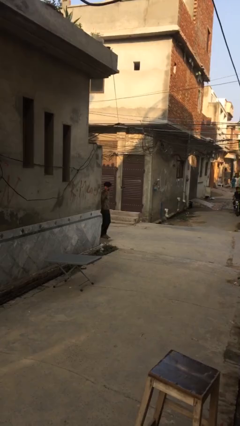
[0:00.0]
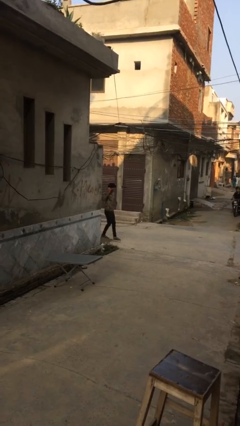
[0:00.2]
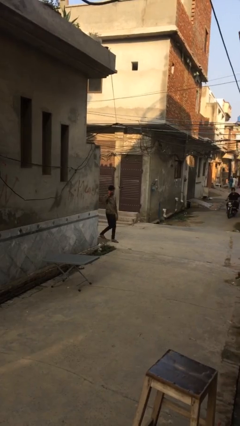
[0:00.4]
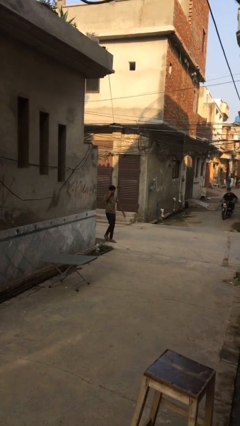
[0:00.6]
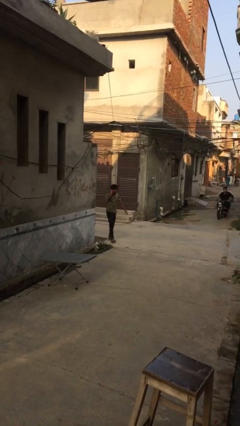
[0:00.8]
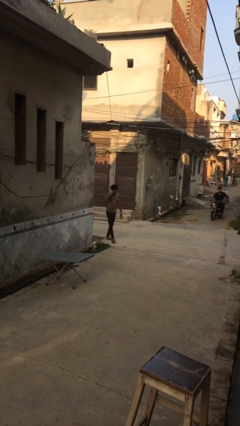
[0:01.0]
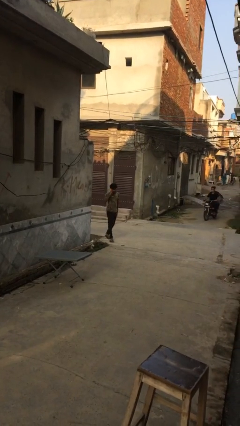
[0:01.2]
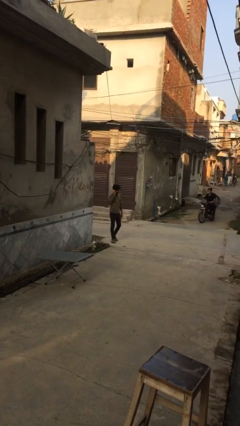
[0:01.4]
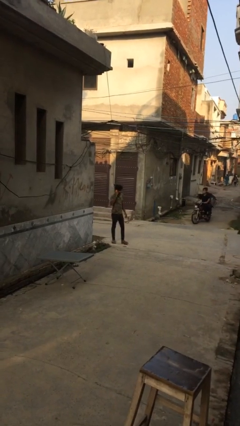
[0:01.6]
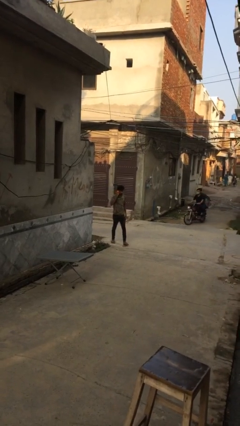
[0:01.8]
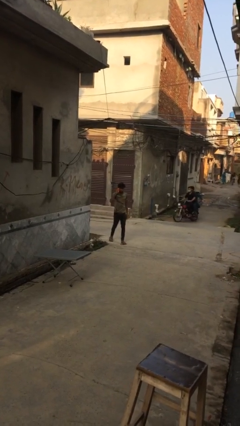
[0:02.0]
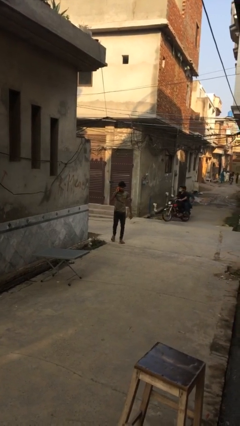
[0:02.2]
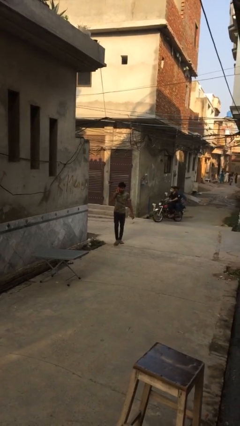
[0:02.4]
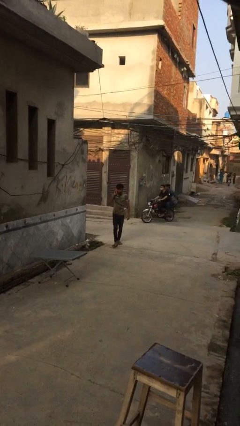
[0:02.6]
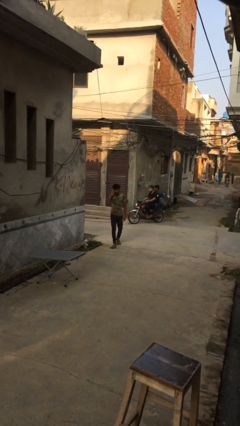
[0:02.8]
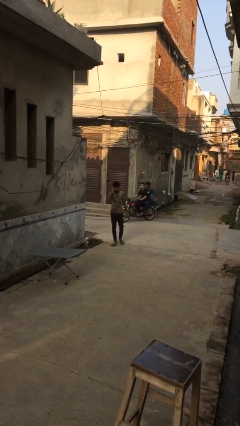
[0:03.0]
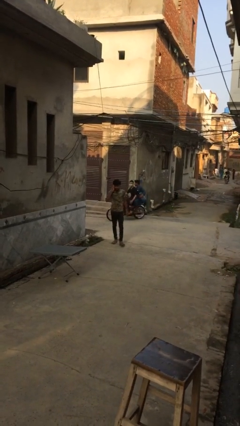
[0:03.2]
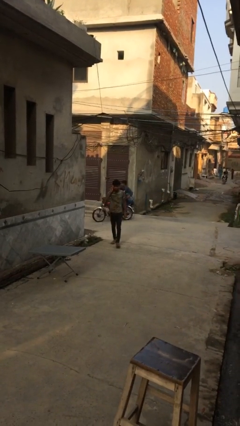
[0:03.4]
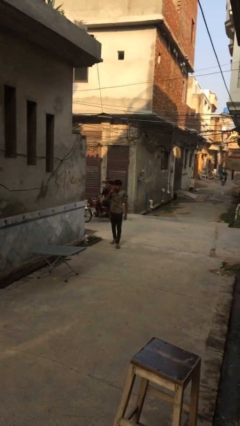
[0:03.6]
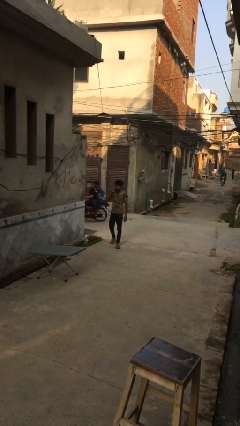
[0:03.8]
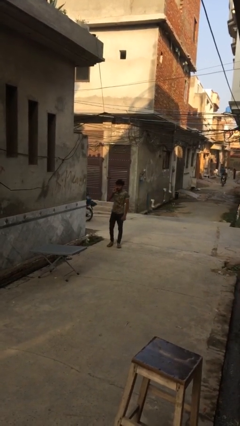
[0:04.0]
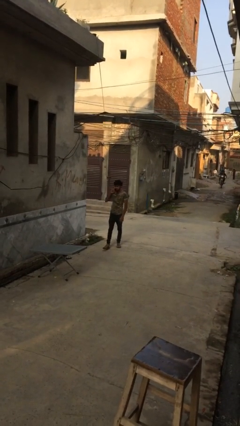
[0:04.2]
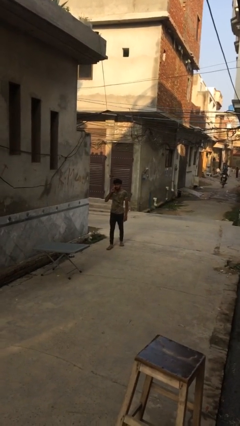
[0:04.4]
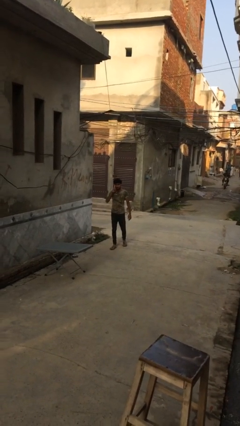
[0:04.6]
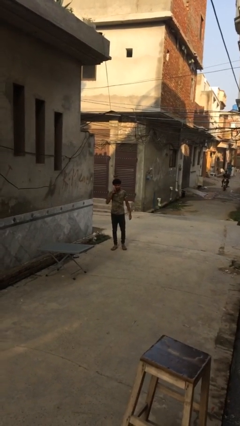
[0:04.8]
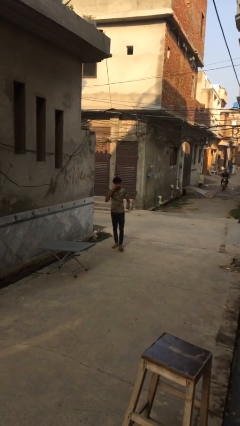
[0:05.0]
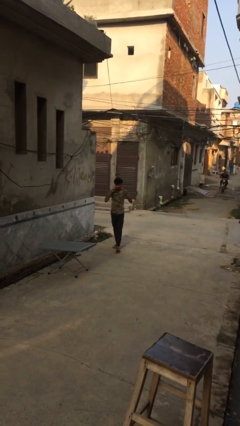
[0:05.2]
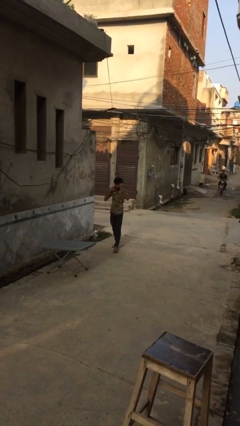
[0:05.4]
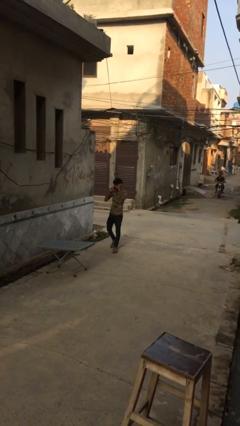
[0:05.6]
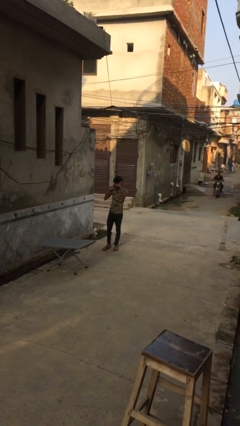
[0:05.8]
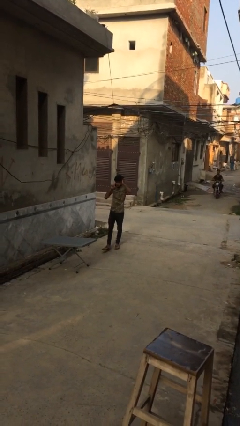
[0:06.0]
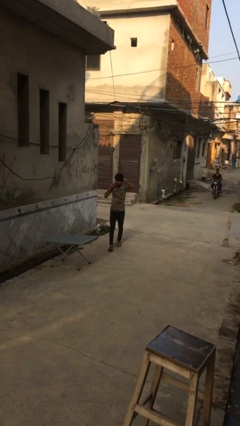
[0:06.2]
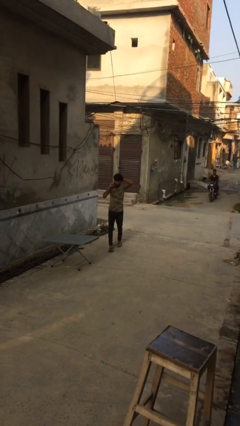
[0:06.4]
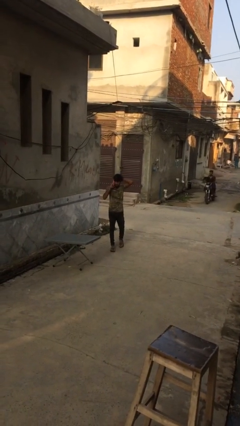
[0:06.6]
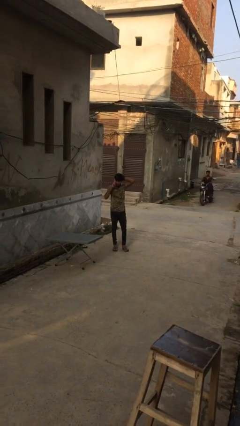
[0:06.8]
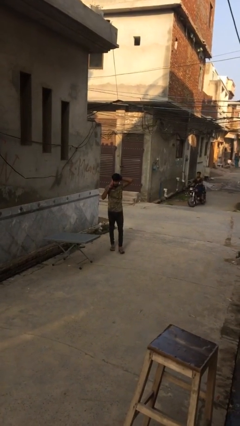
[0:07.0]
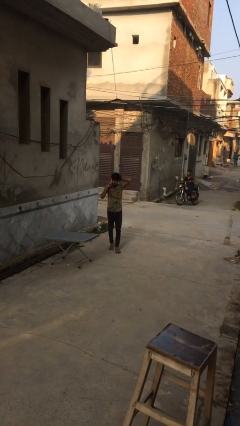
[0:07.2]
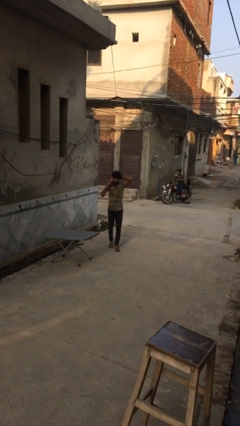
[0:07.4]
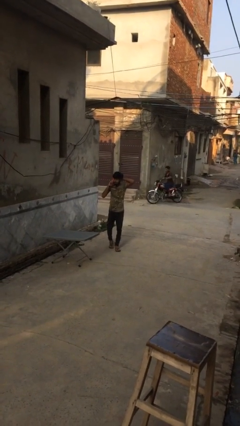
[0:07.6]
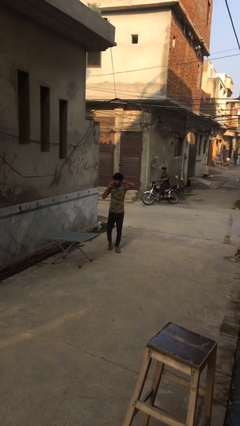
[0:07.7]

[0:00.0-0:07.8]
person enters scene through structure

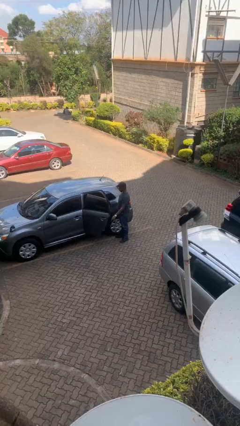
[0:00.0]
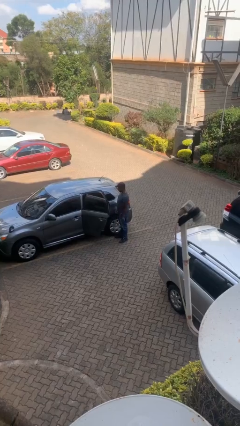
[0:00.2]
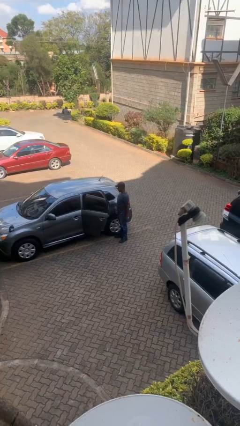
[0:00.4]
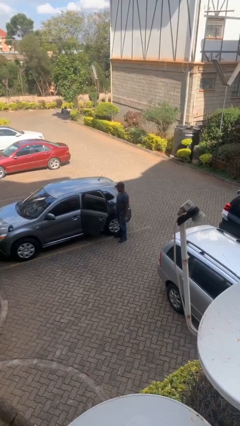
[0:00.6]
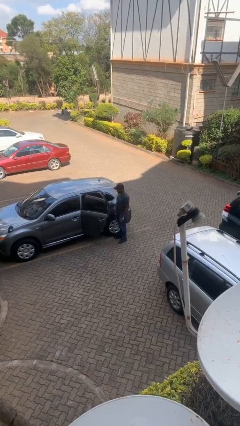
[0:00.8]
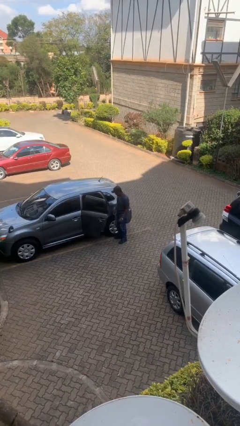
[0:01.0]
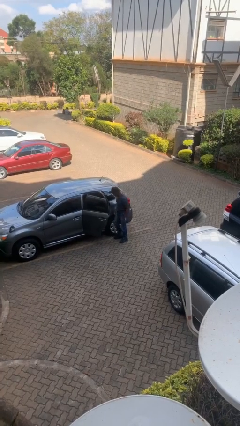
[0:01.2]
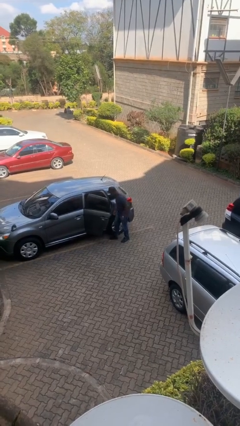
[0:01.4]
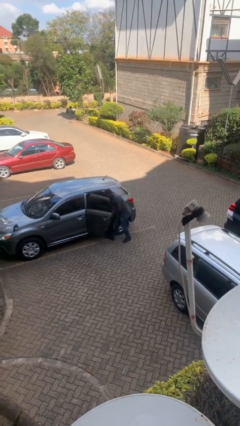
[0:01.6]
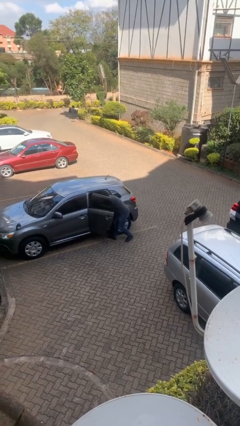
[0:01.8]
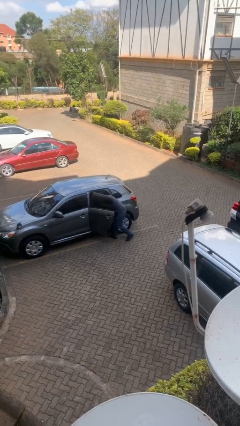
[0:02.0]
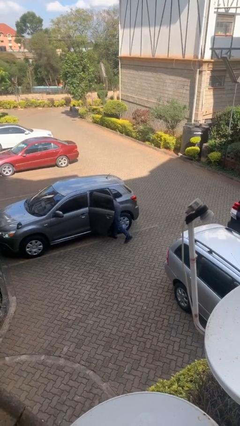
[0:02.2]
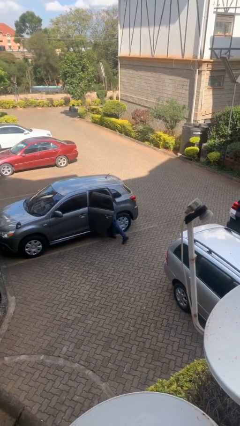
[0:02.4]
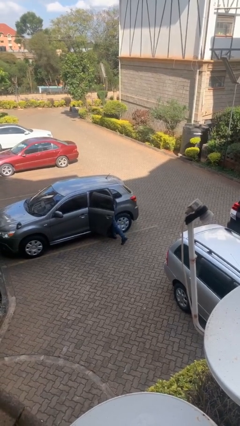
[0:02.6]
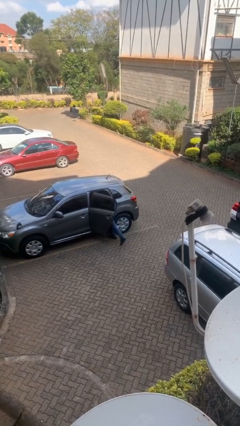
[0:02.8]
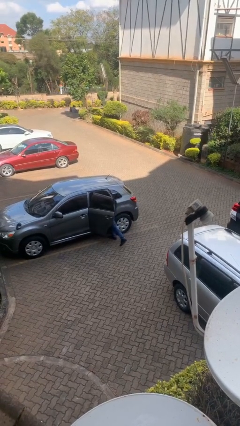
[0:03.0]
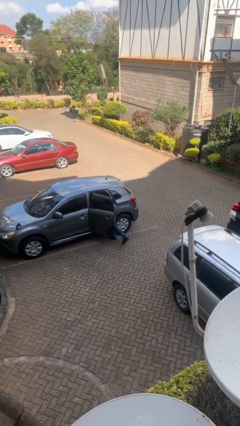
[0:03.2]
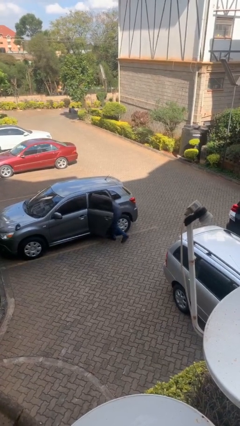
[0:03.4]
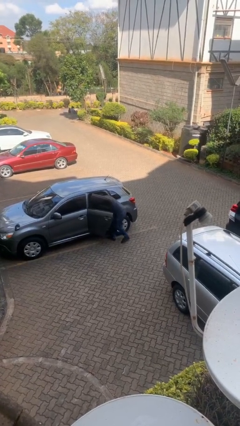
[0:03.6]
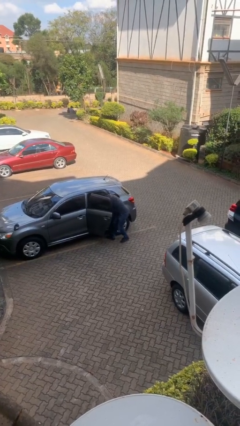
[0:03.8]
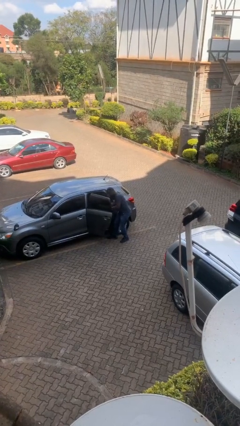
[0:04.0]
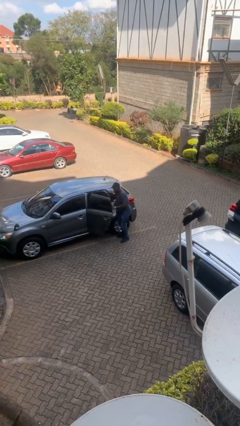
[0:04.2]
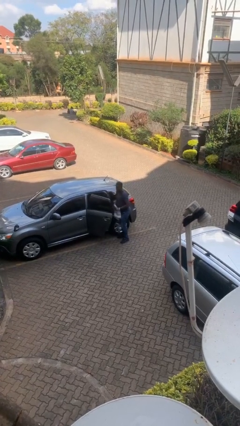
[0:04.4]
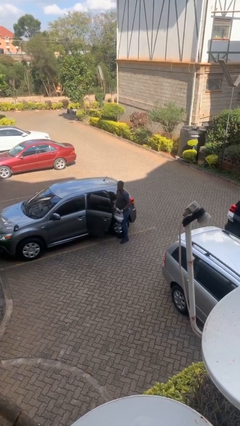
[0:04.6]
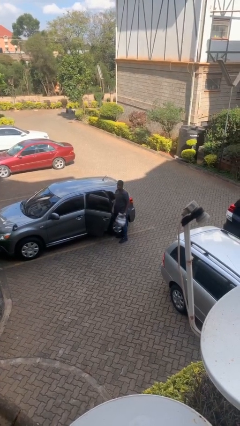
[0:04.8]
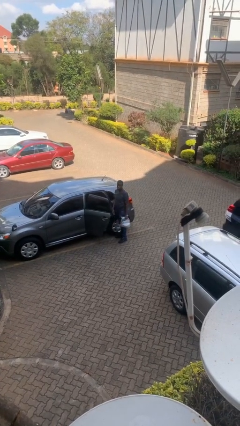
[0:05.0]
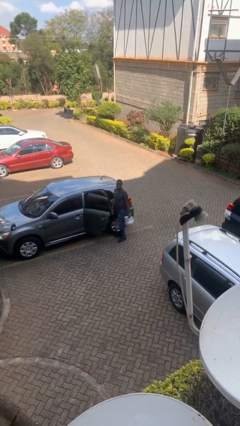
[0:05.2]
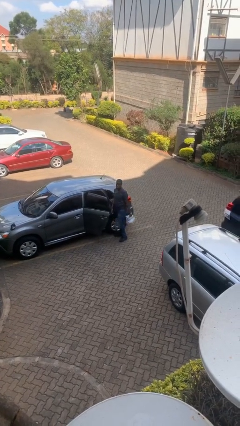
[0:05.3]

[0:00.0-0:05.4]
person unloads car

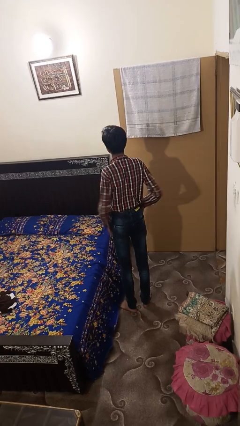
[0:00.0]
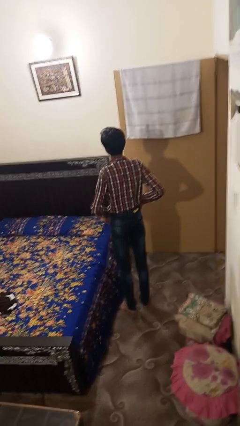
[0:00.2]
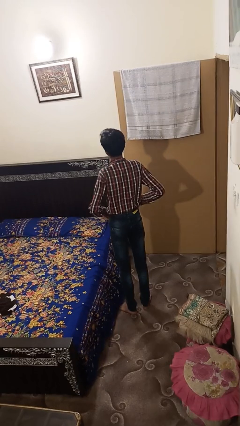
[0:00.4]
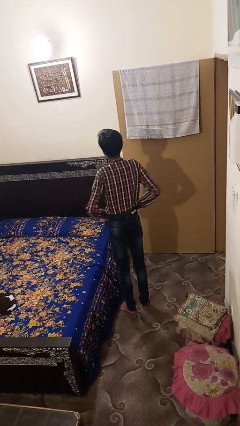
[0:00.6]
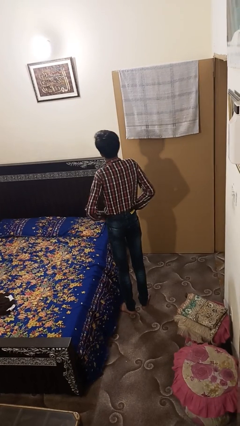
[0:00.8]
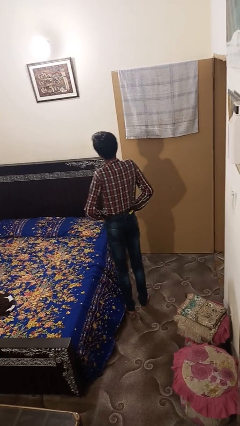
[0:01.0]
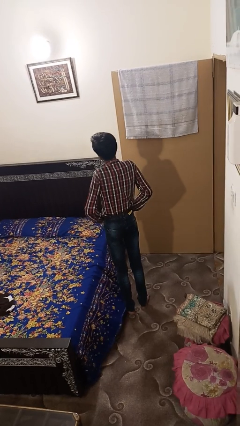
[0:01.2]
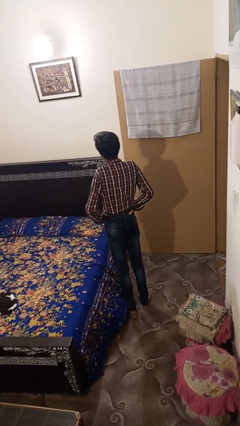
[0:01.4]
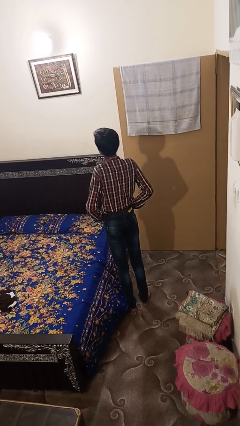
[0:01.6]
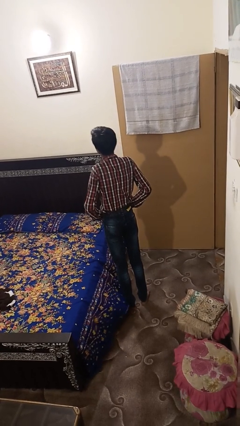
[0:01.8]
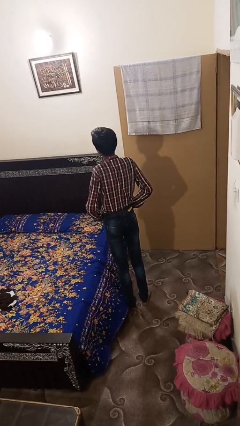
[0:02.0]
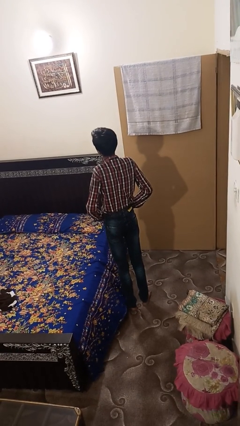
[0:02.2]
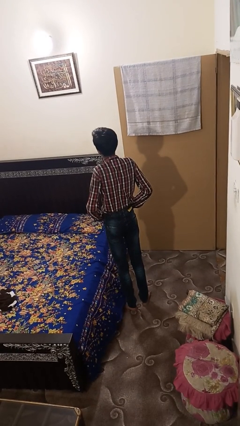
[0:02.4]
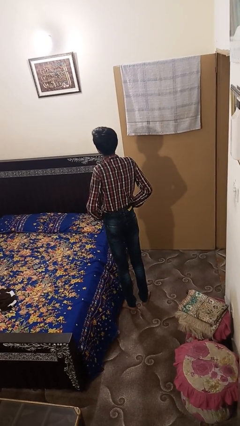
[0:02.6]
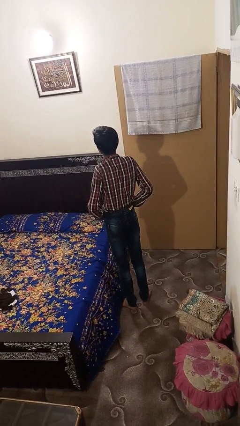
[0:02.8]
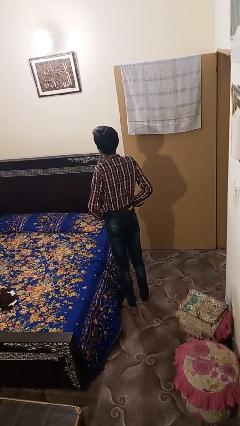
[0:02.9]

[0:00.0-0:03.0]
person puts hands in back pockets

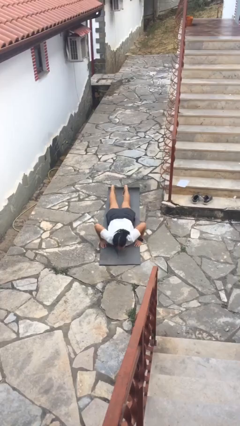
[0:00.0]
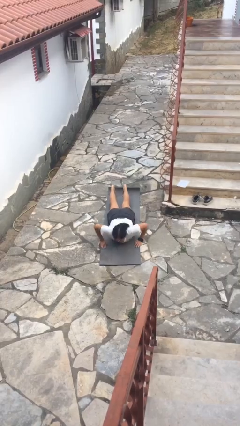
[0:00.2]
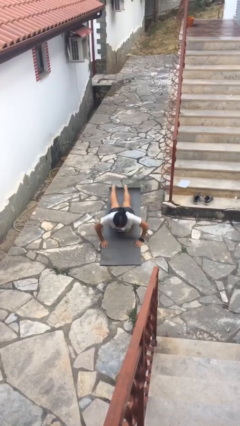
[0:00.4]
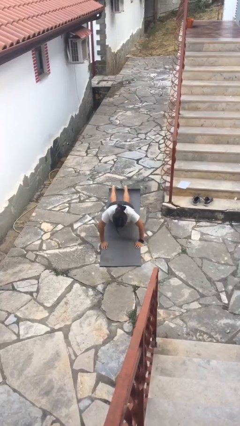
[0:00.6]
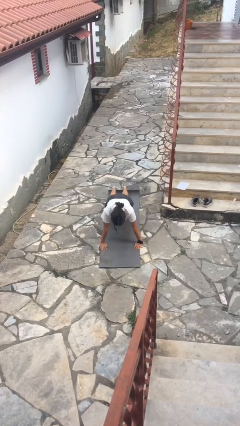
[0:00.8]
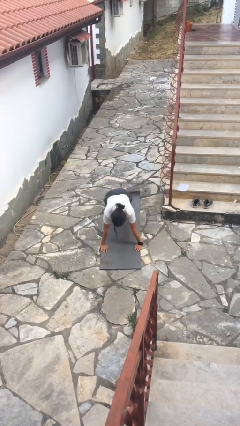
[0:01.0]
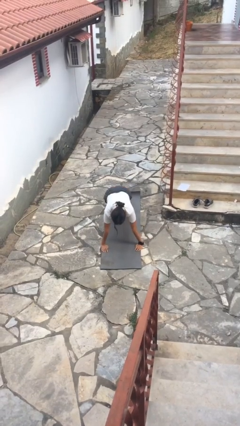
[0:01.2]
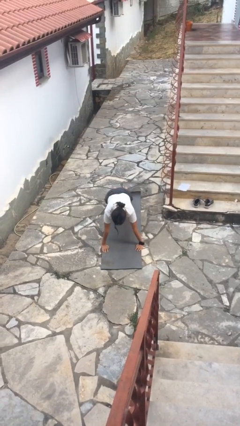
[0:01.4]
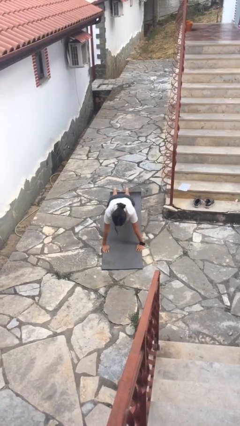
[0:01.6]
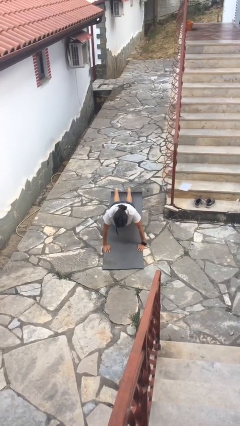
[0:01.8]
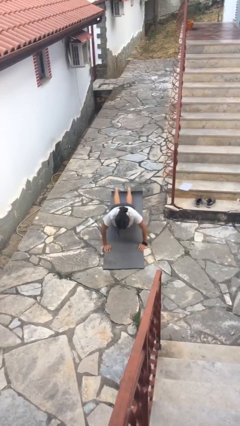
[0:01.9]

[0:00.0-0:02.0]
person exercises with pushup
